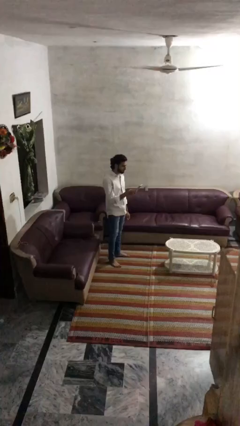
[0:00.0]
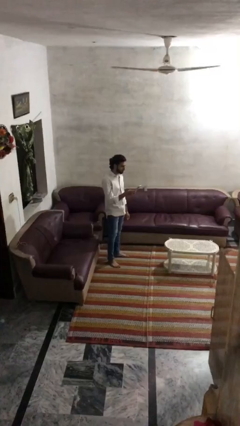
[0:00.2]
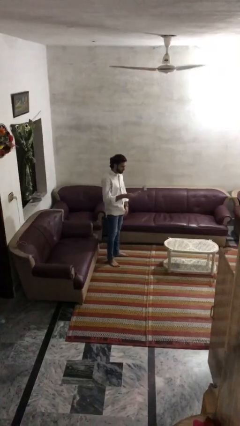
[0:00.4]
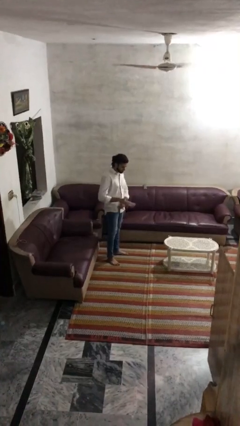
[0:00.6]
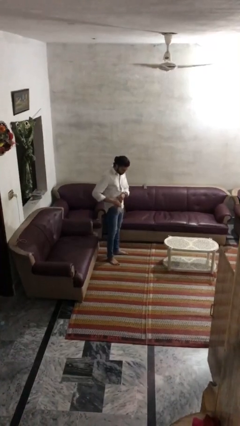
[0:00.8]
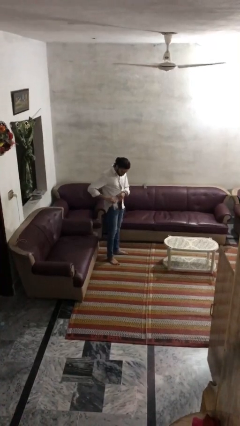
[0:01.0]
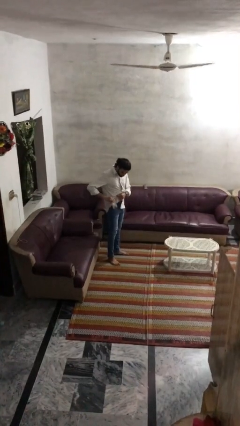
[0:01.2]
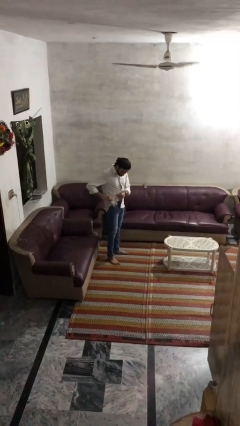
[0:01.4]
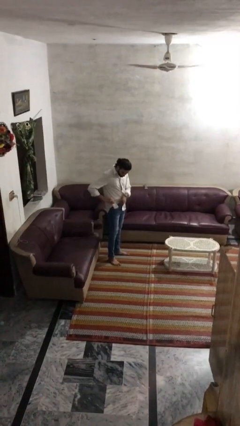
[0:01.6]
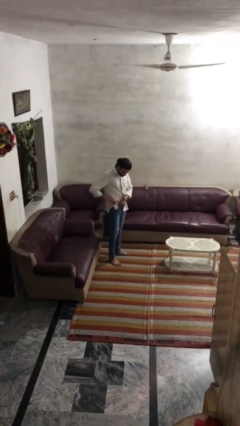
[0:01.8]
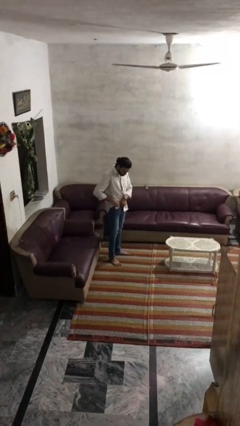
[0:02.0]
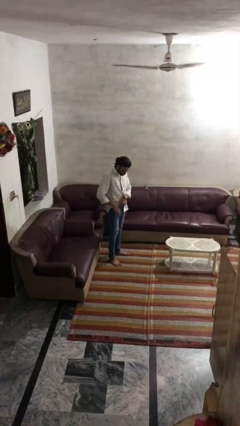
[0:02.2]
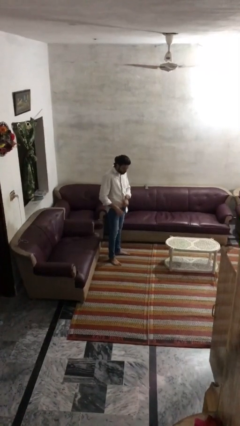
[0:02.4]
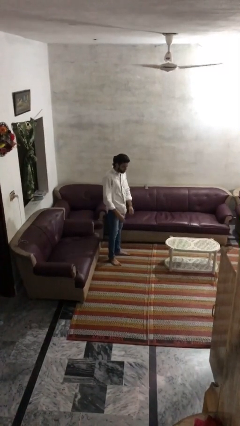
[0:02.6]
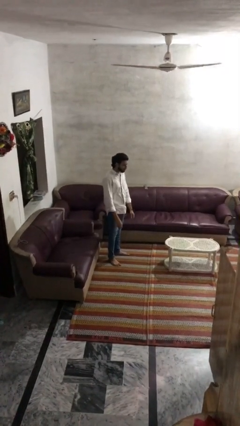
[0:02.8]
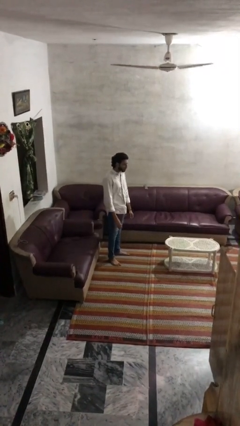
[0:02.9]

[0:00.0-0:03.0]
person puts phone into pocket

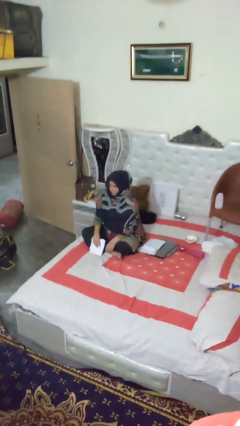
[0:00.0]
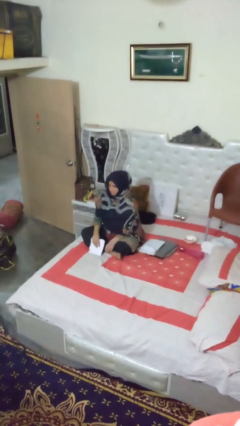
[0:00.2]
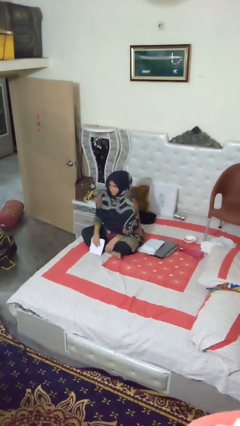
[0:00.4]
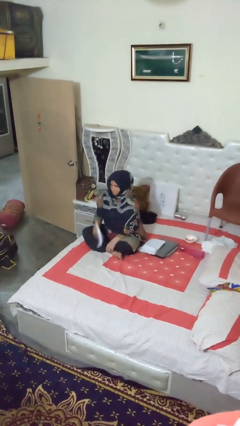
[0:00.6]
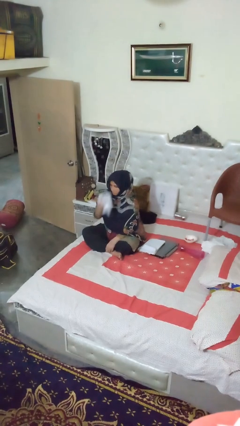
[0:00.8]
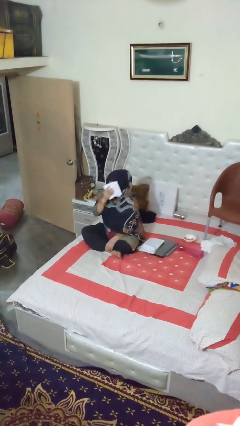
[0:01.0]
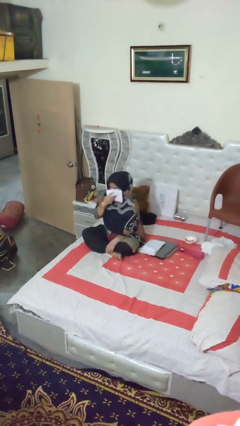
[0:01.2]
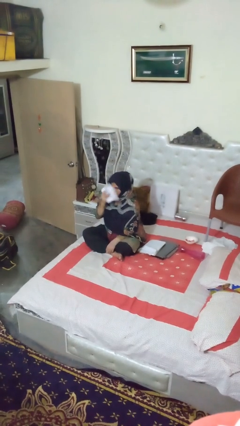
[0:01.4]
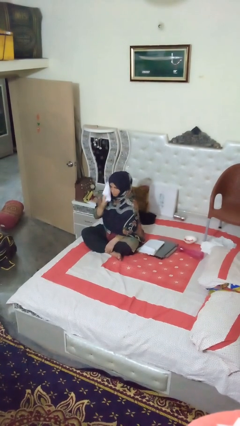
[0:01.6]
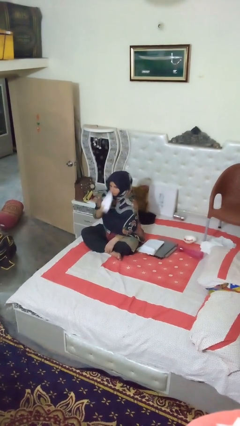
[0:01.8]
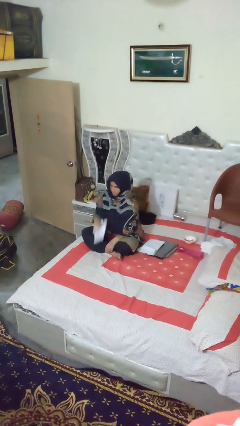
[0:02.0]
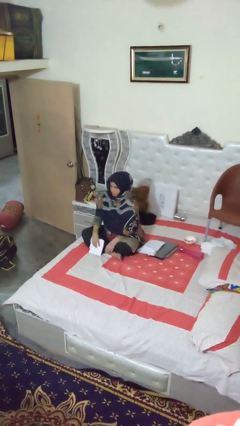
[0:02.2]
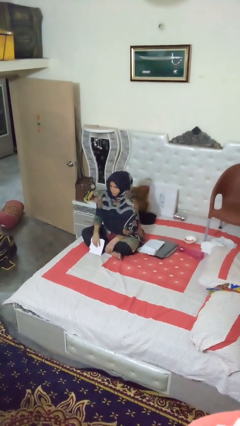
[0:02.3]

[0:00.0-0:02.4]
person wipes mouth with napkin

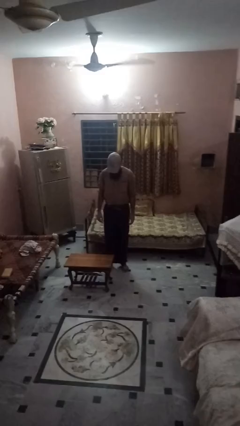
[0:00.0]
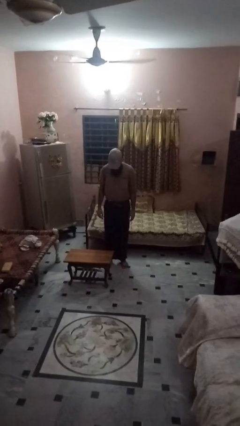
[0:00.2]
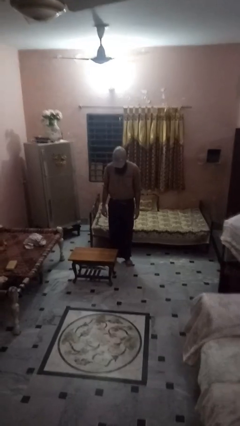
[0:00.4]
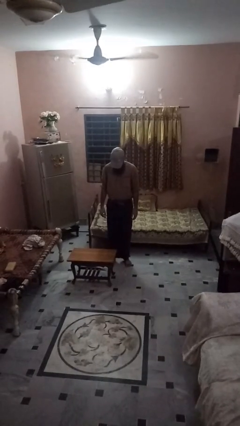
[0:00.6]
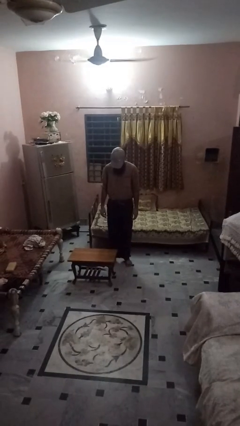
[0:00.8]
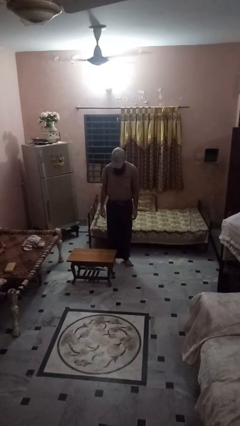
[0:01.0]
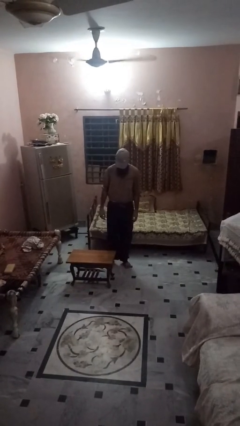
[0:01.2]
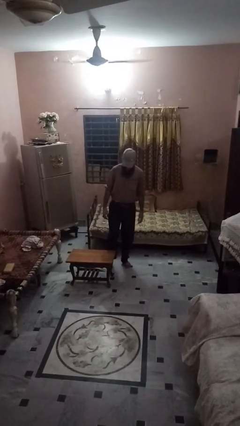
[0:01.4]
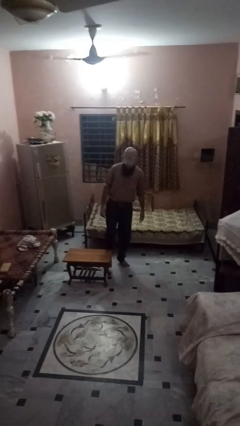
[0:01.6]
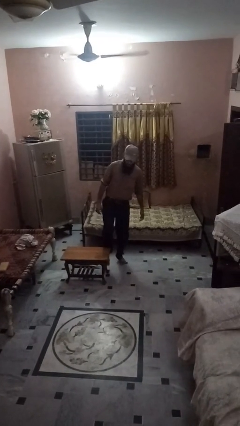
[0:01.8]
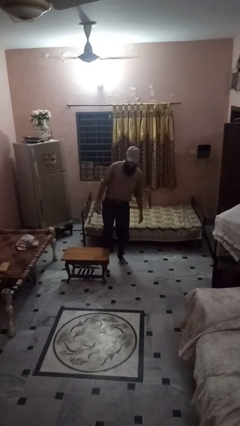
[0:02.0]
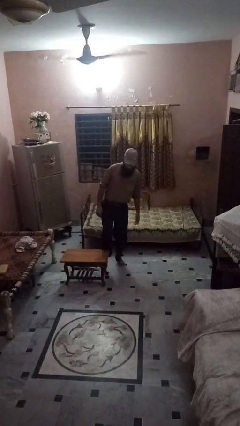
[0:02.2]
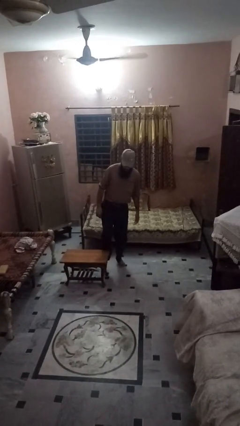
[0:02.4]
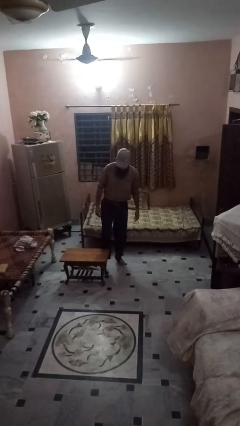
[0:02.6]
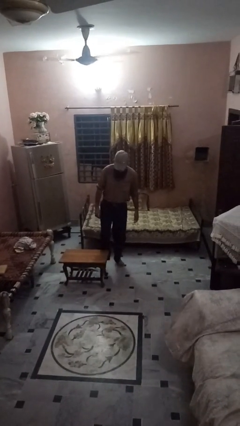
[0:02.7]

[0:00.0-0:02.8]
person trips on object on floor

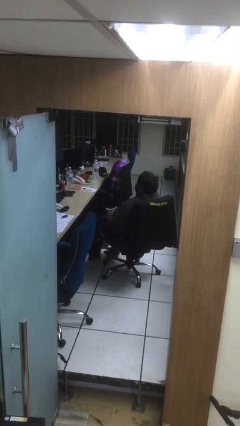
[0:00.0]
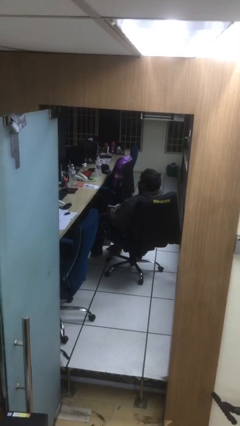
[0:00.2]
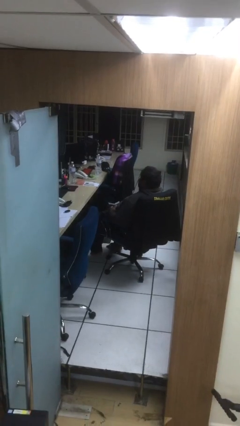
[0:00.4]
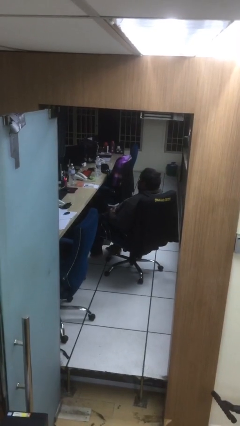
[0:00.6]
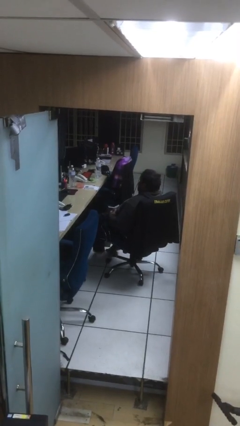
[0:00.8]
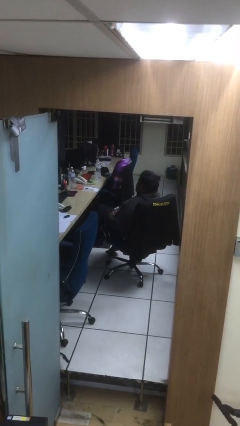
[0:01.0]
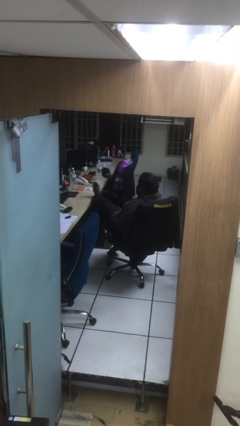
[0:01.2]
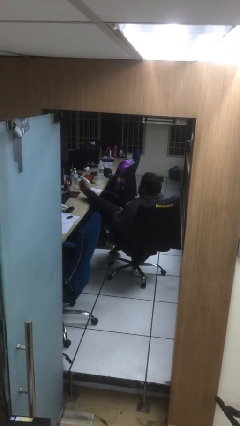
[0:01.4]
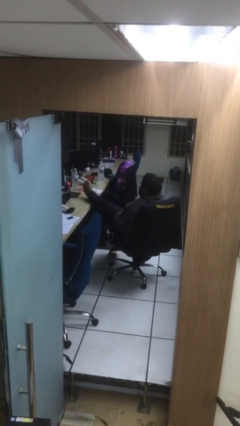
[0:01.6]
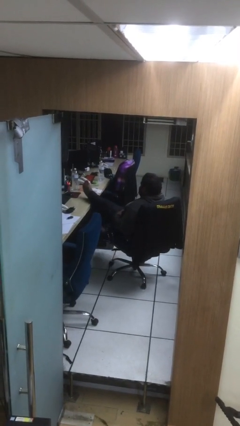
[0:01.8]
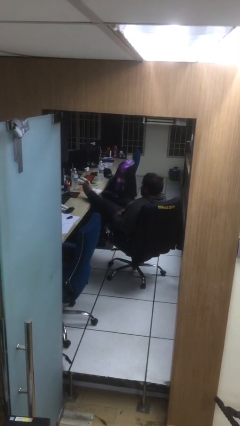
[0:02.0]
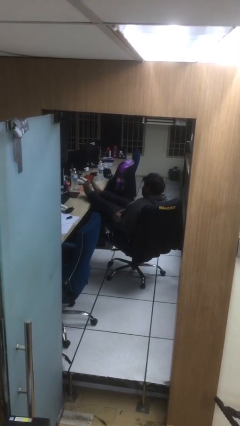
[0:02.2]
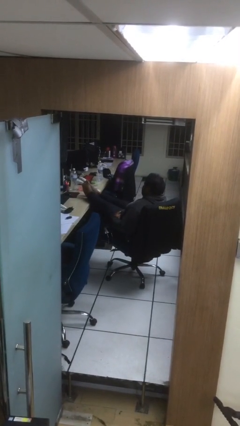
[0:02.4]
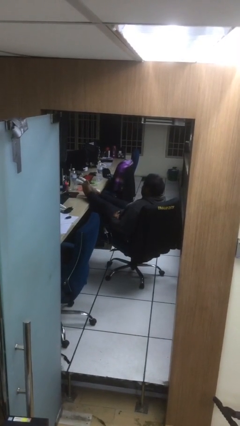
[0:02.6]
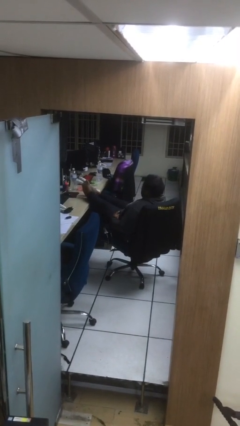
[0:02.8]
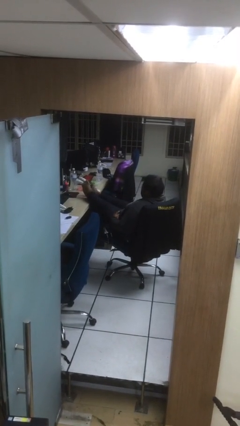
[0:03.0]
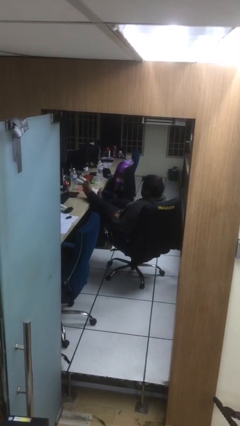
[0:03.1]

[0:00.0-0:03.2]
person puts feet up

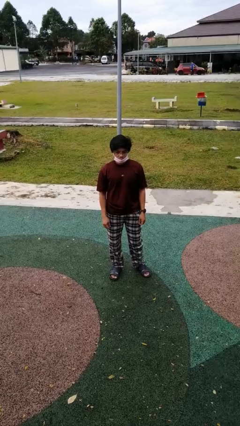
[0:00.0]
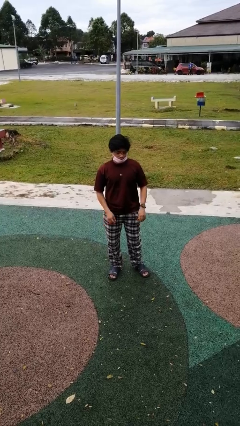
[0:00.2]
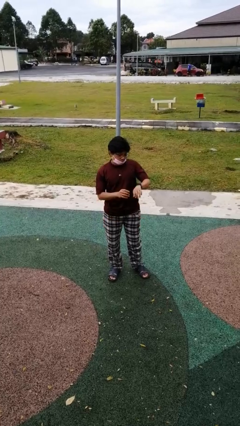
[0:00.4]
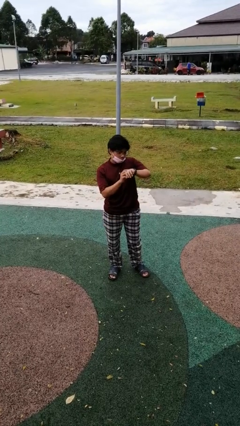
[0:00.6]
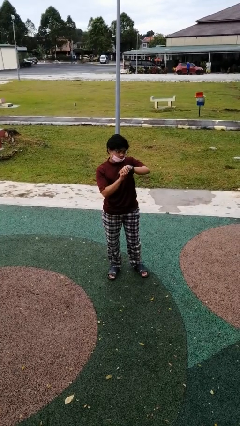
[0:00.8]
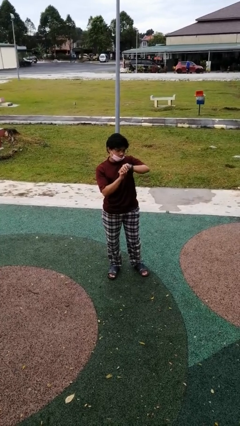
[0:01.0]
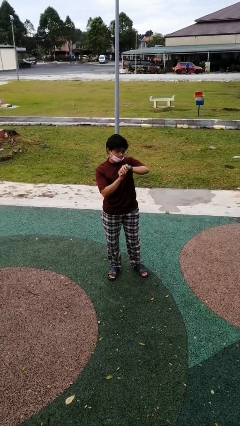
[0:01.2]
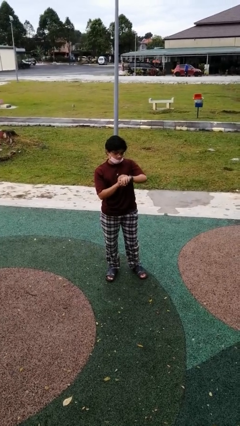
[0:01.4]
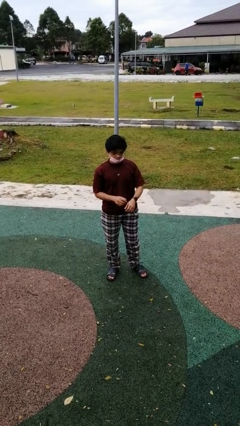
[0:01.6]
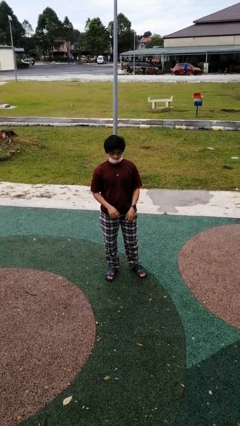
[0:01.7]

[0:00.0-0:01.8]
person looks at wristwatch

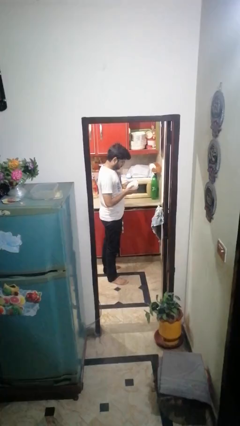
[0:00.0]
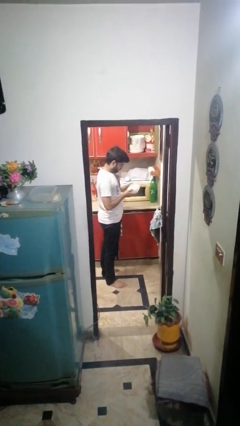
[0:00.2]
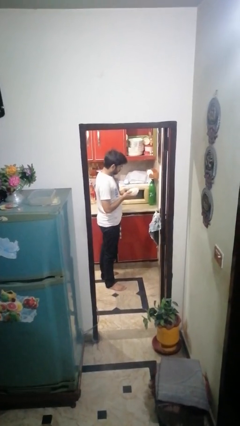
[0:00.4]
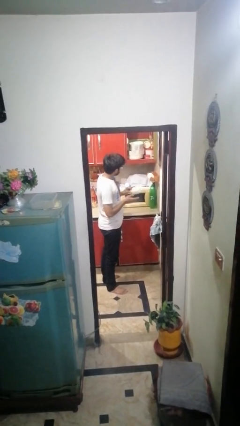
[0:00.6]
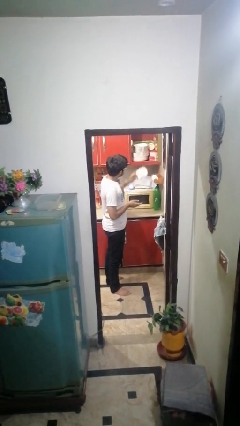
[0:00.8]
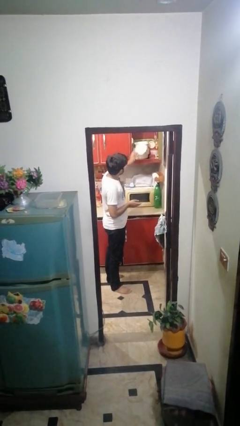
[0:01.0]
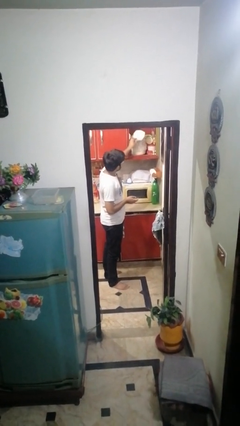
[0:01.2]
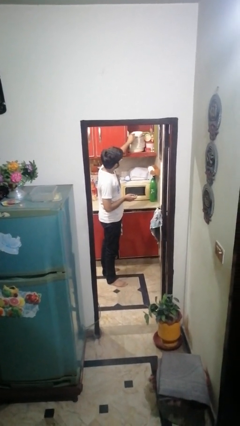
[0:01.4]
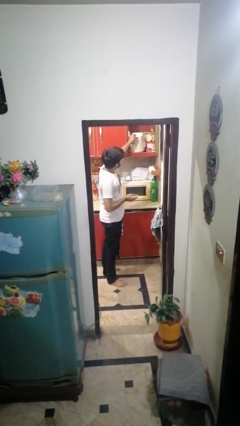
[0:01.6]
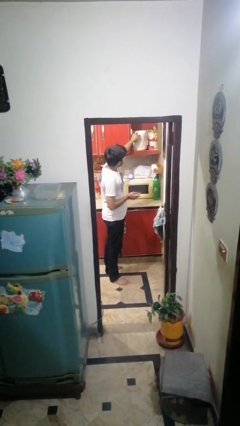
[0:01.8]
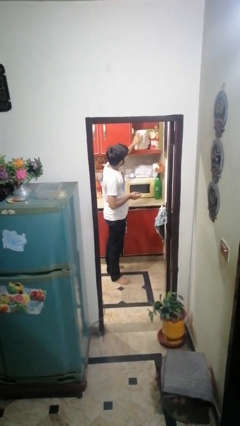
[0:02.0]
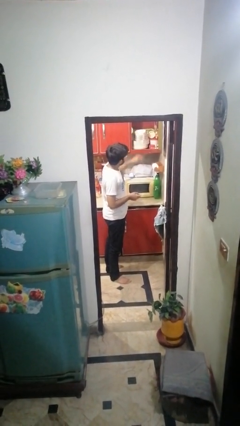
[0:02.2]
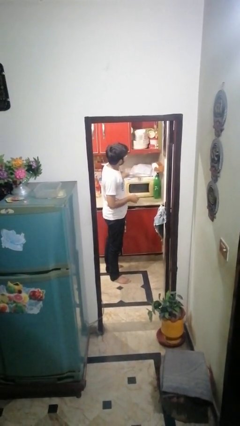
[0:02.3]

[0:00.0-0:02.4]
person puts down object into cabinet

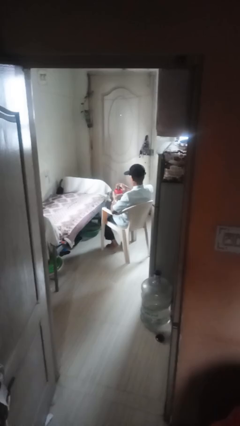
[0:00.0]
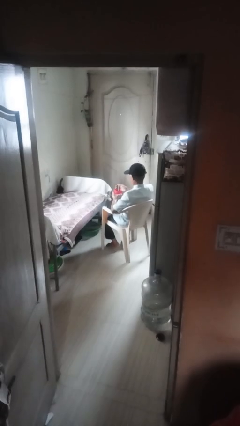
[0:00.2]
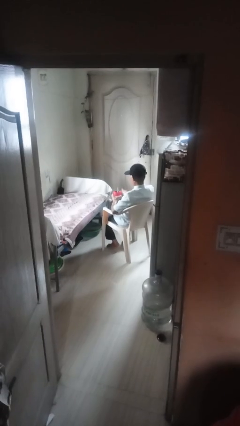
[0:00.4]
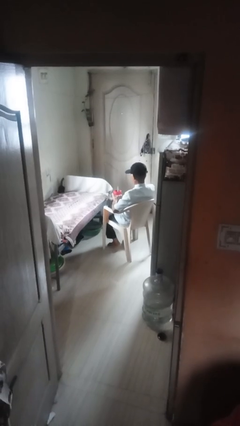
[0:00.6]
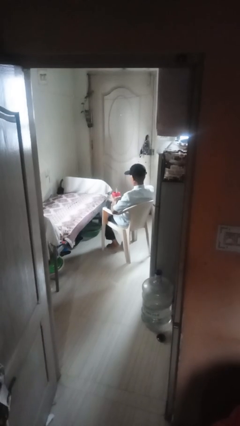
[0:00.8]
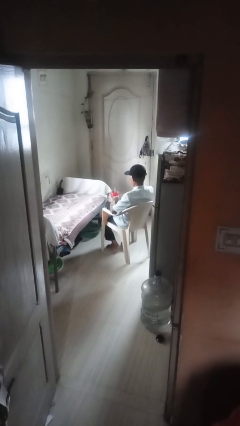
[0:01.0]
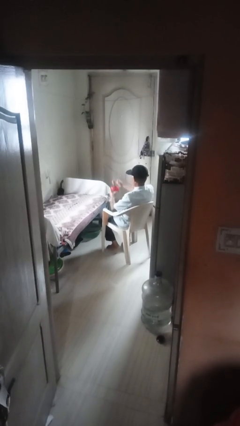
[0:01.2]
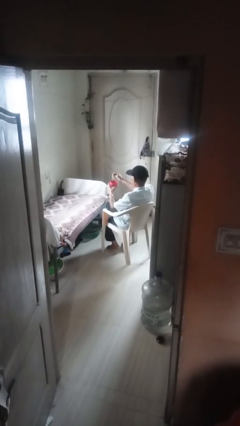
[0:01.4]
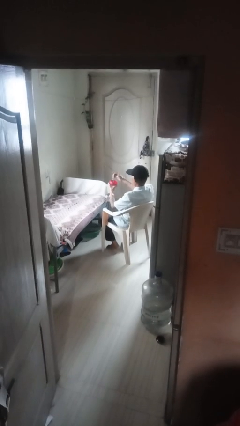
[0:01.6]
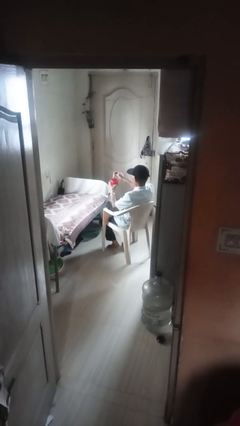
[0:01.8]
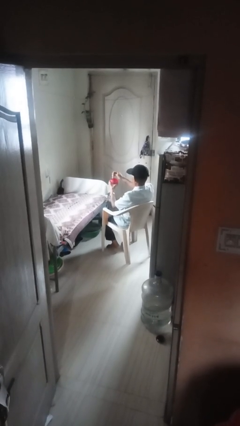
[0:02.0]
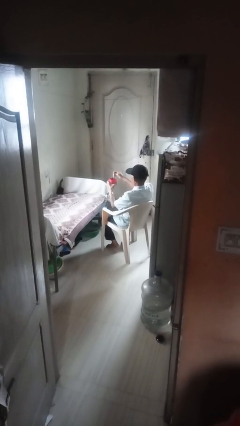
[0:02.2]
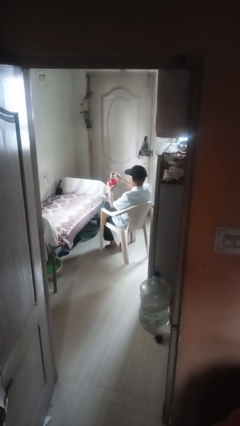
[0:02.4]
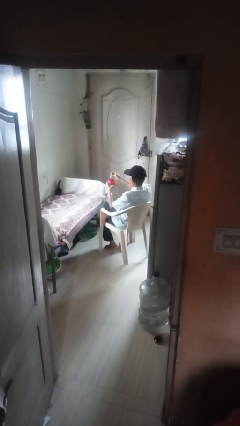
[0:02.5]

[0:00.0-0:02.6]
person stirs mug
